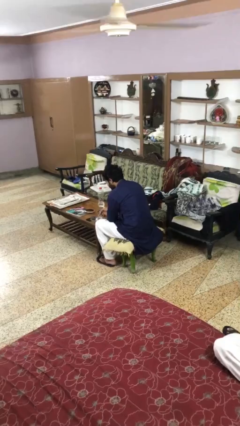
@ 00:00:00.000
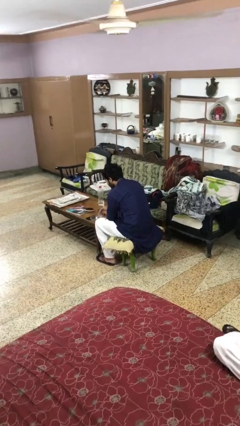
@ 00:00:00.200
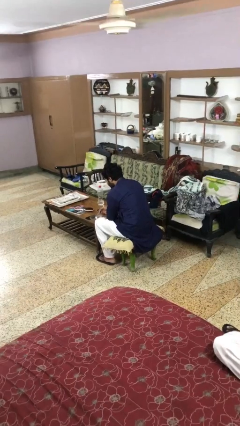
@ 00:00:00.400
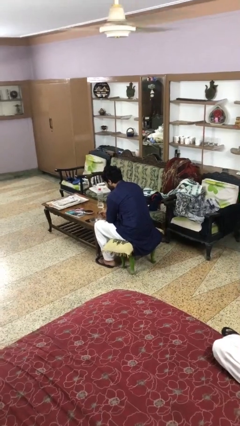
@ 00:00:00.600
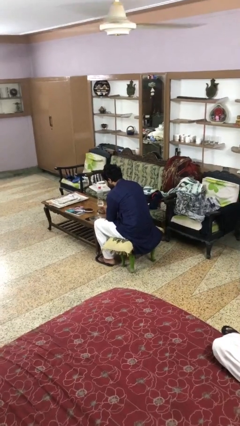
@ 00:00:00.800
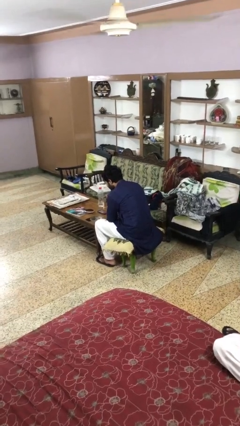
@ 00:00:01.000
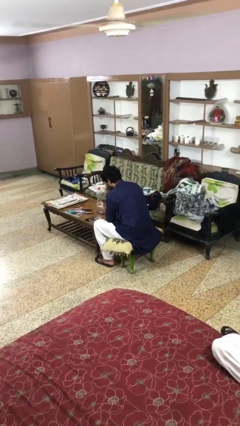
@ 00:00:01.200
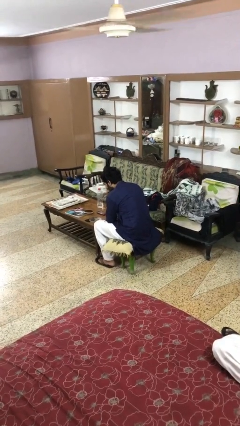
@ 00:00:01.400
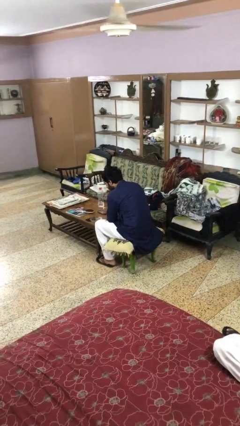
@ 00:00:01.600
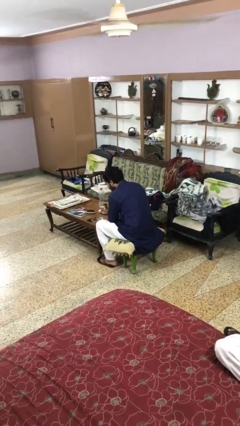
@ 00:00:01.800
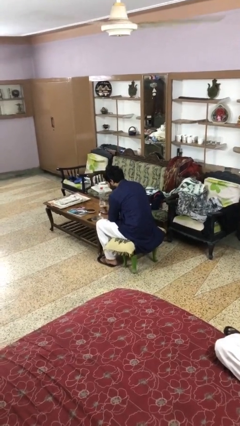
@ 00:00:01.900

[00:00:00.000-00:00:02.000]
person eats with utensil

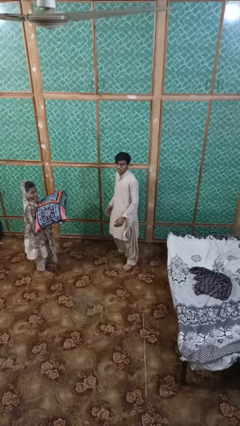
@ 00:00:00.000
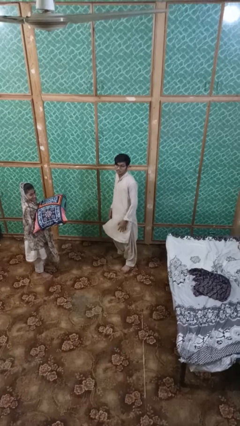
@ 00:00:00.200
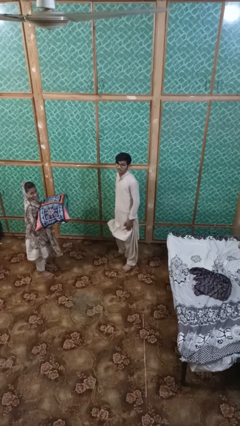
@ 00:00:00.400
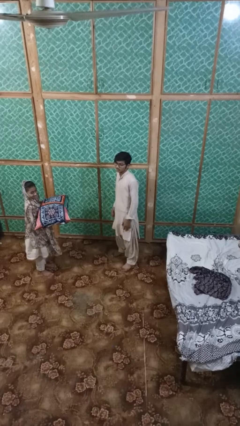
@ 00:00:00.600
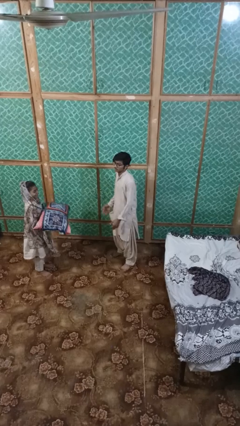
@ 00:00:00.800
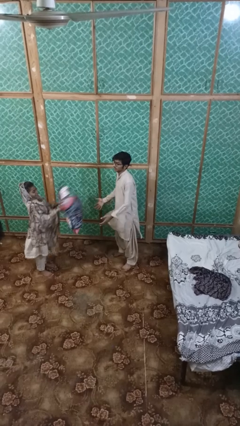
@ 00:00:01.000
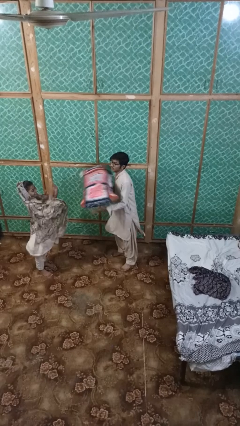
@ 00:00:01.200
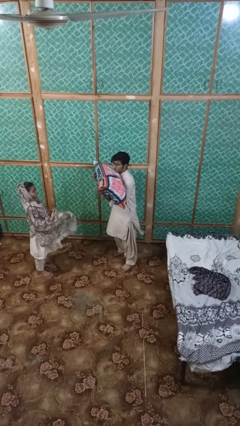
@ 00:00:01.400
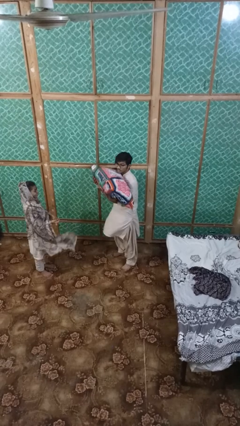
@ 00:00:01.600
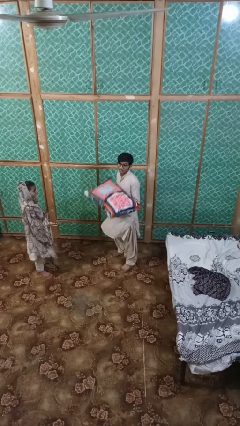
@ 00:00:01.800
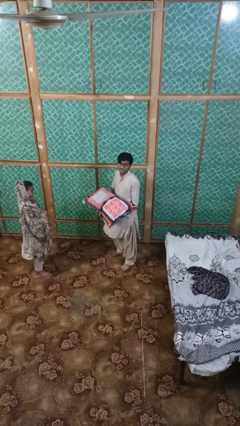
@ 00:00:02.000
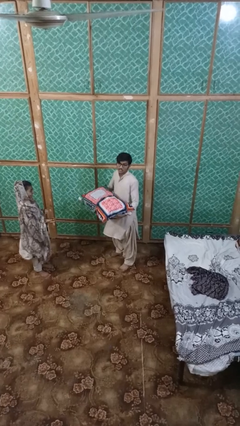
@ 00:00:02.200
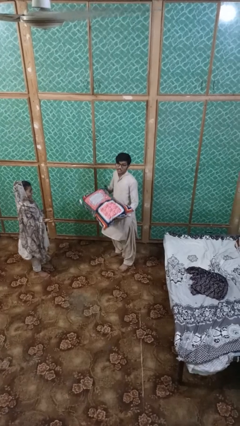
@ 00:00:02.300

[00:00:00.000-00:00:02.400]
person catches object from person

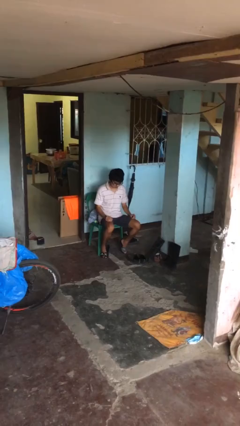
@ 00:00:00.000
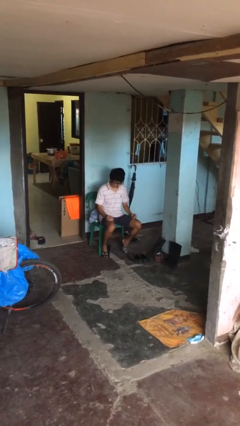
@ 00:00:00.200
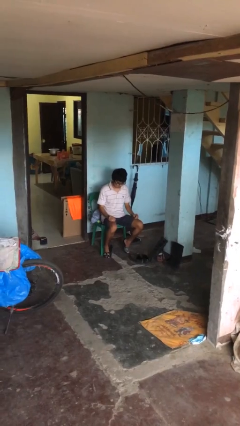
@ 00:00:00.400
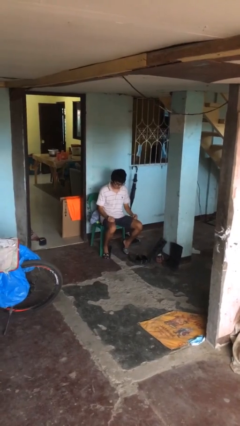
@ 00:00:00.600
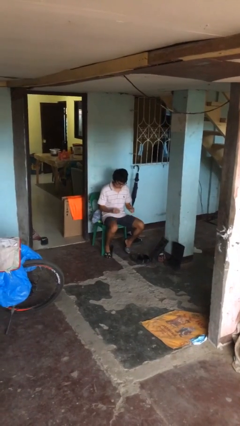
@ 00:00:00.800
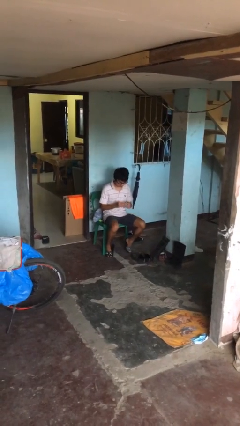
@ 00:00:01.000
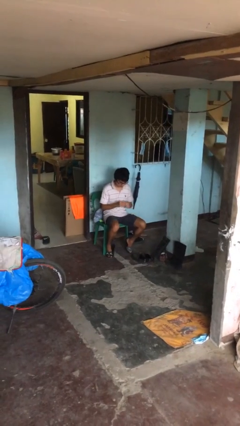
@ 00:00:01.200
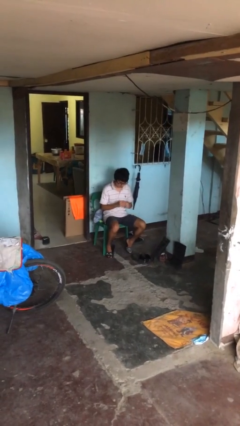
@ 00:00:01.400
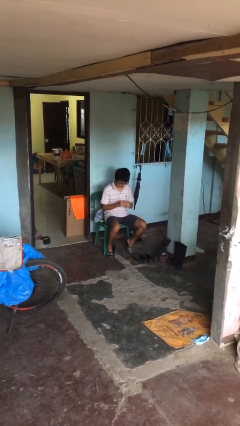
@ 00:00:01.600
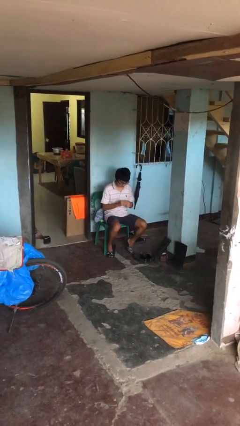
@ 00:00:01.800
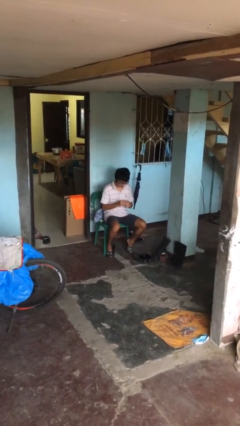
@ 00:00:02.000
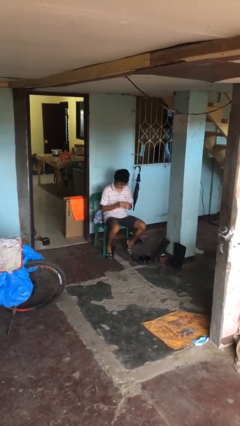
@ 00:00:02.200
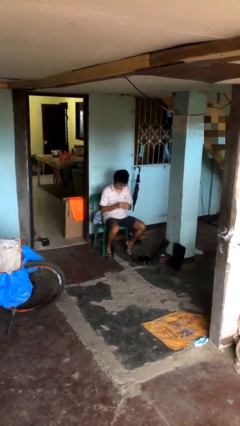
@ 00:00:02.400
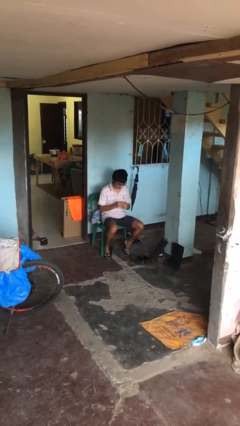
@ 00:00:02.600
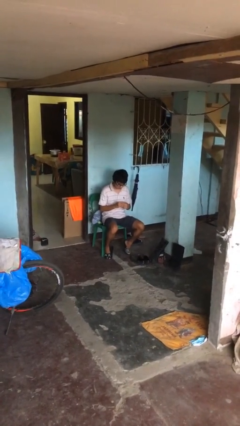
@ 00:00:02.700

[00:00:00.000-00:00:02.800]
person puts on ring

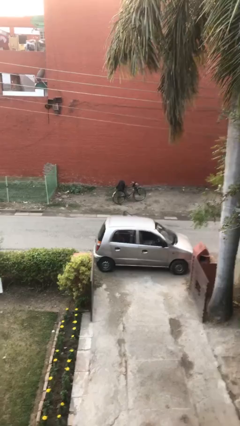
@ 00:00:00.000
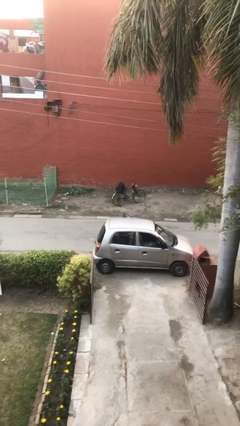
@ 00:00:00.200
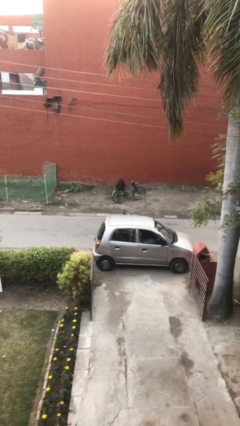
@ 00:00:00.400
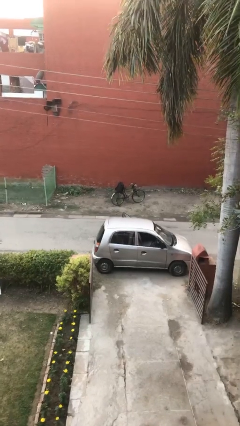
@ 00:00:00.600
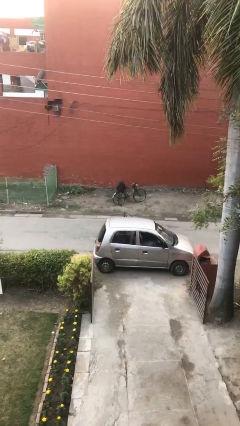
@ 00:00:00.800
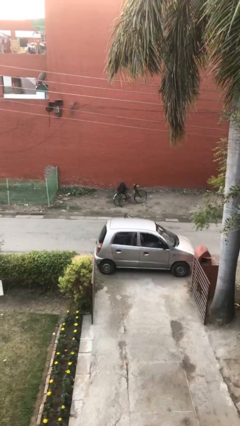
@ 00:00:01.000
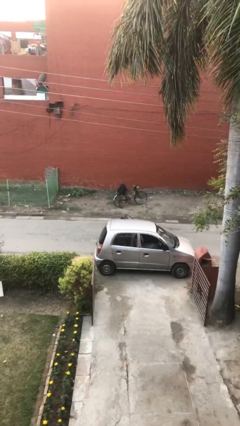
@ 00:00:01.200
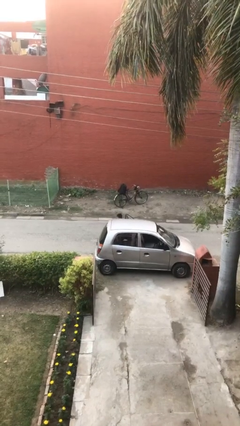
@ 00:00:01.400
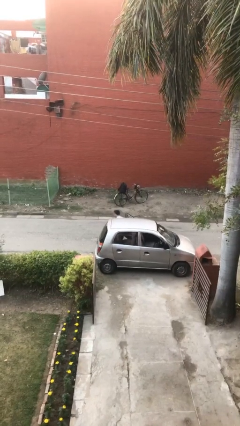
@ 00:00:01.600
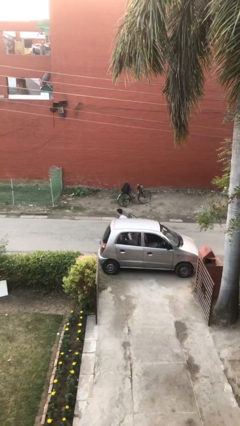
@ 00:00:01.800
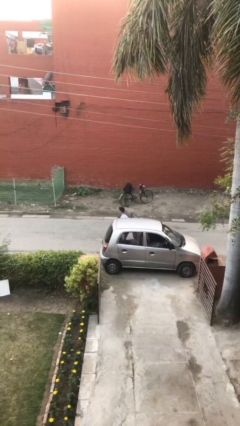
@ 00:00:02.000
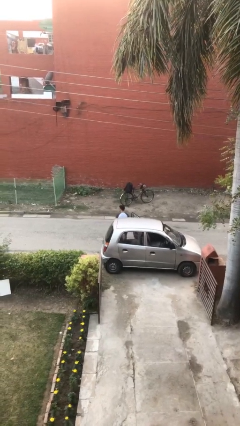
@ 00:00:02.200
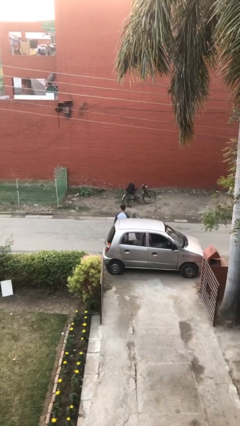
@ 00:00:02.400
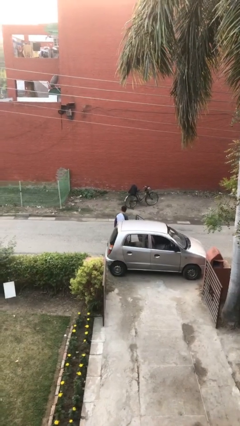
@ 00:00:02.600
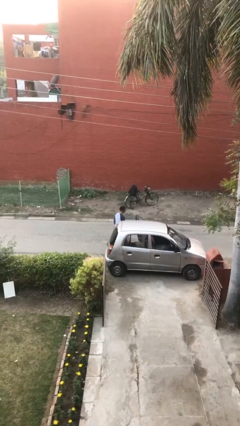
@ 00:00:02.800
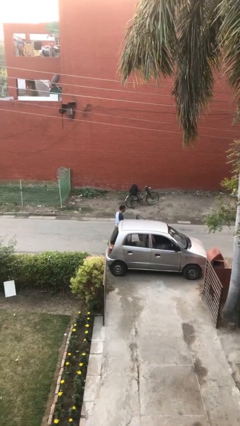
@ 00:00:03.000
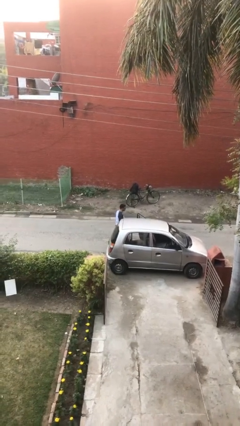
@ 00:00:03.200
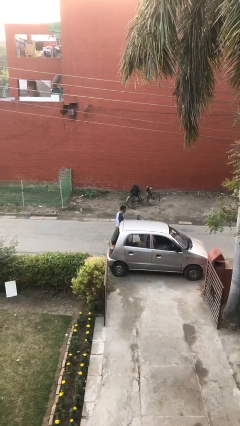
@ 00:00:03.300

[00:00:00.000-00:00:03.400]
person exits car

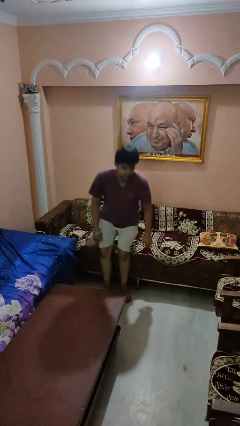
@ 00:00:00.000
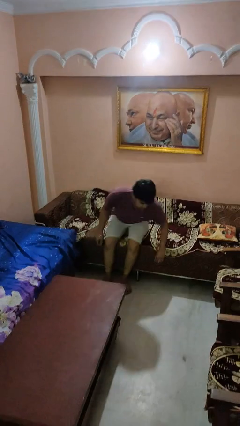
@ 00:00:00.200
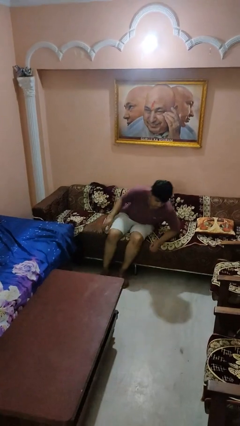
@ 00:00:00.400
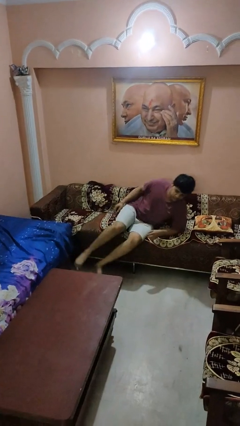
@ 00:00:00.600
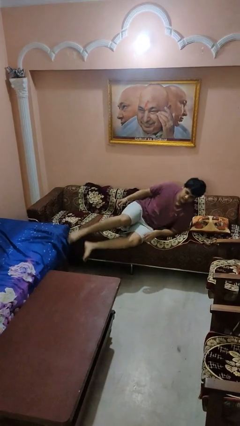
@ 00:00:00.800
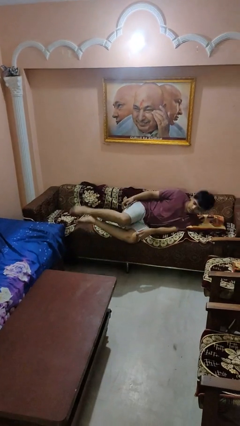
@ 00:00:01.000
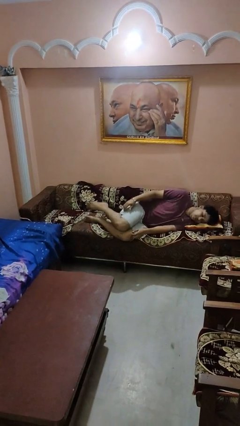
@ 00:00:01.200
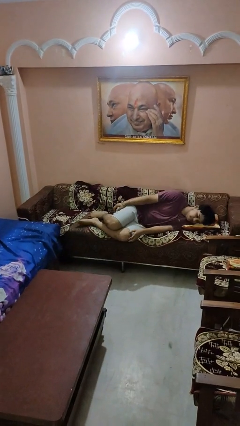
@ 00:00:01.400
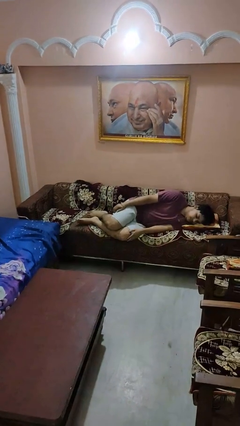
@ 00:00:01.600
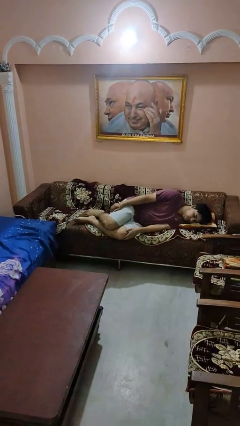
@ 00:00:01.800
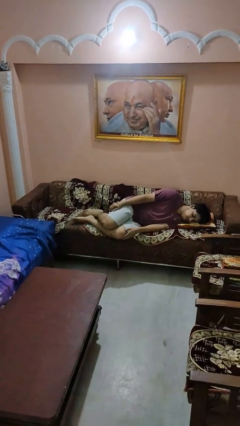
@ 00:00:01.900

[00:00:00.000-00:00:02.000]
person lies down on couch

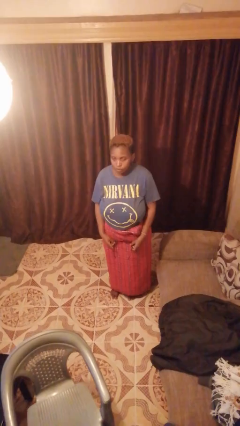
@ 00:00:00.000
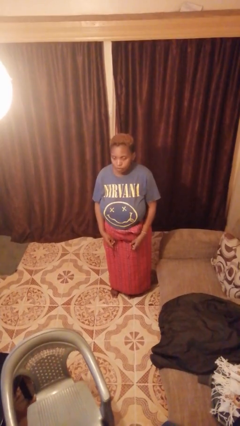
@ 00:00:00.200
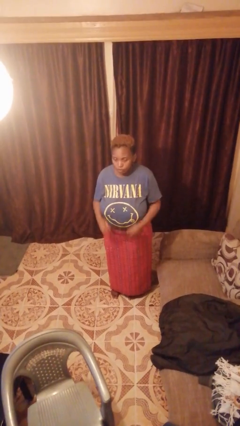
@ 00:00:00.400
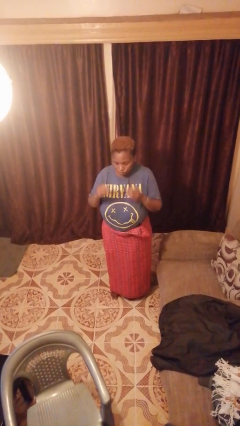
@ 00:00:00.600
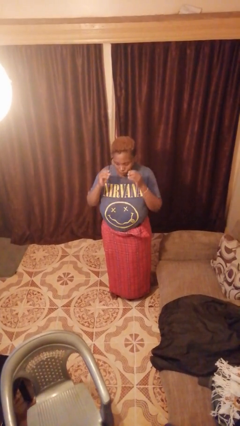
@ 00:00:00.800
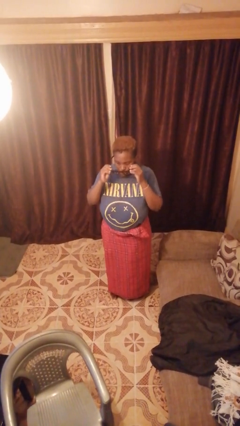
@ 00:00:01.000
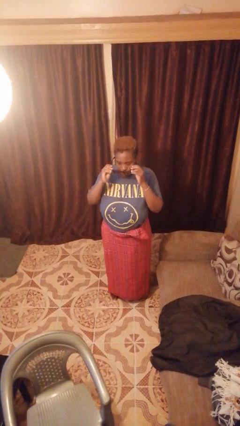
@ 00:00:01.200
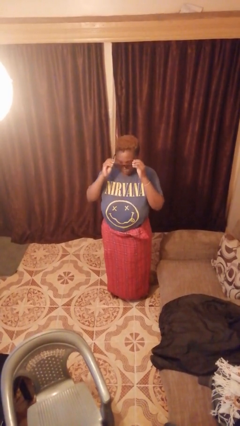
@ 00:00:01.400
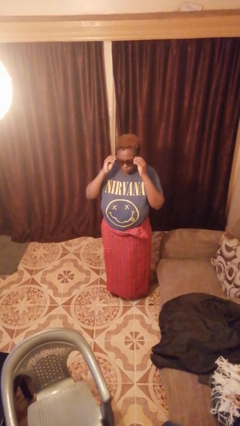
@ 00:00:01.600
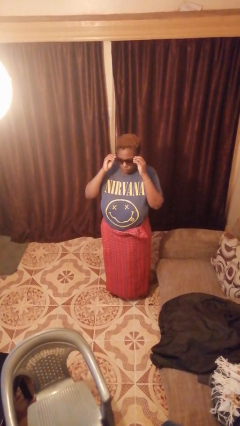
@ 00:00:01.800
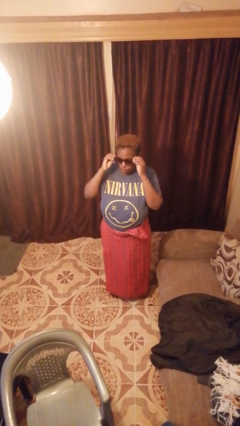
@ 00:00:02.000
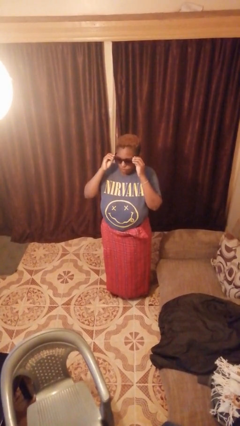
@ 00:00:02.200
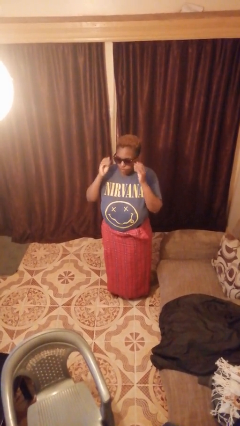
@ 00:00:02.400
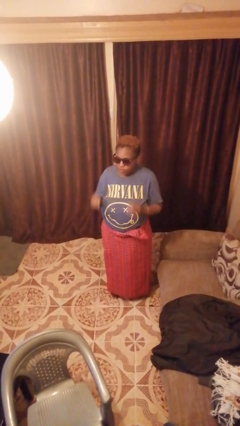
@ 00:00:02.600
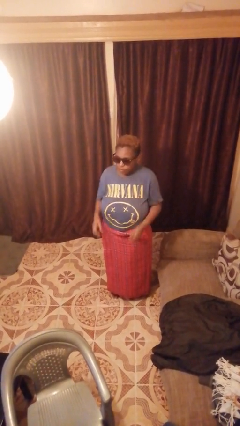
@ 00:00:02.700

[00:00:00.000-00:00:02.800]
person puts on sunglasses

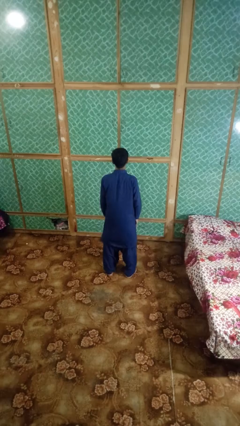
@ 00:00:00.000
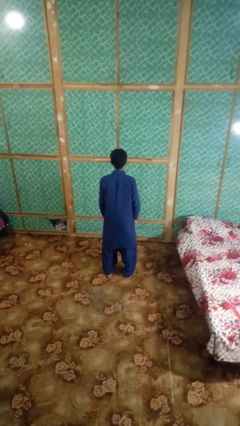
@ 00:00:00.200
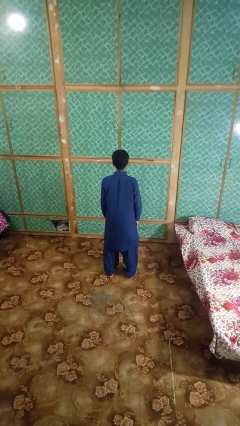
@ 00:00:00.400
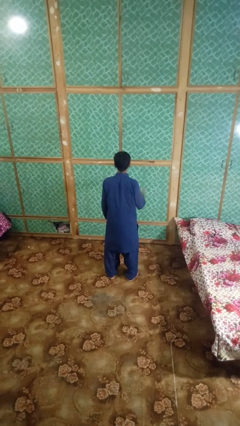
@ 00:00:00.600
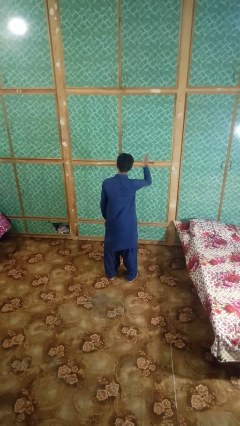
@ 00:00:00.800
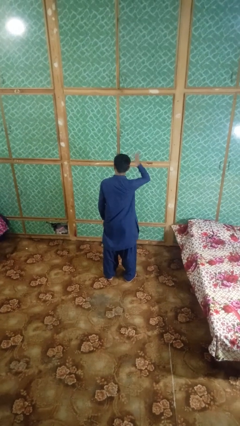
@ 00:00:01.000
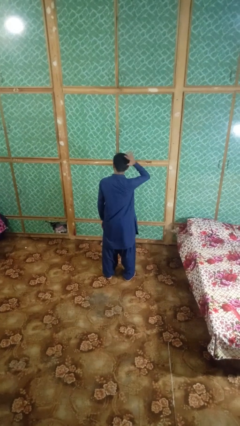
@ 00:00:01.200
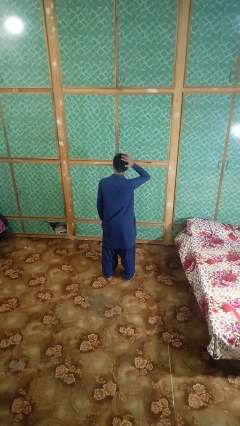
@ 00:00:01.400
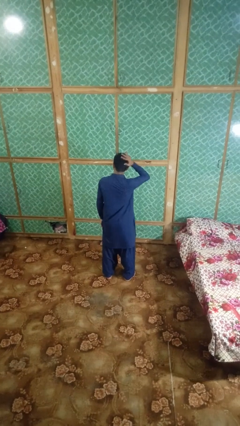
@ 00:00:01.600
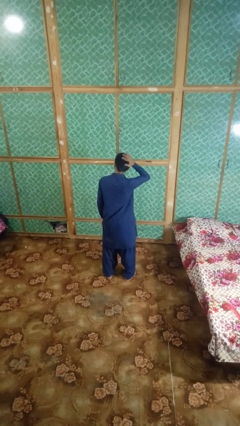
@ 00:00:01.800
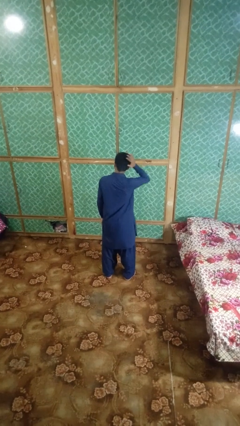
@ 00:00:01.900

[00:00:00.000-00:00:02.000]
person pats head
